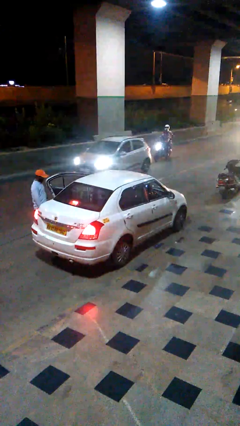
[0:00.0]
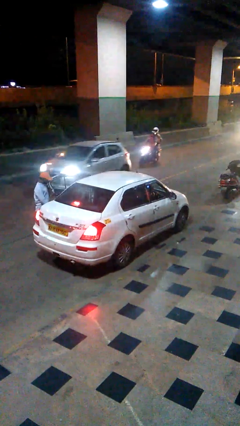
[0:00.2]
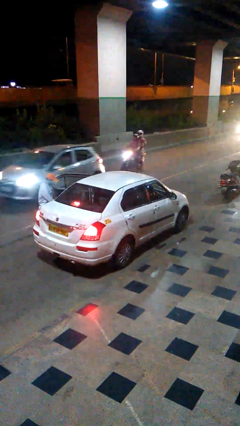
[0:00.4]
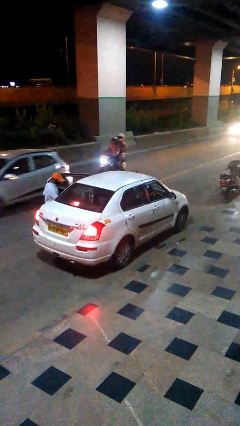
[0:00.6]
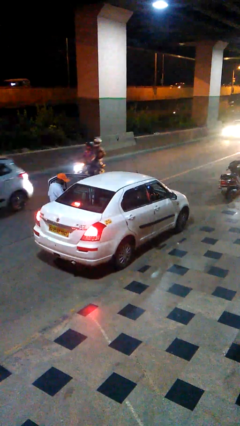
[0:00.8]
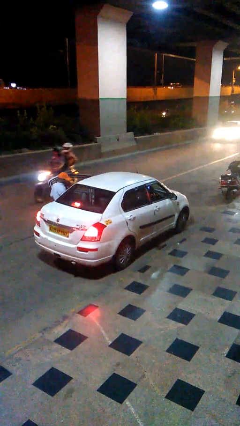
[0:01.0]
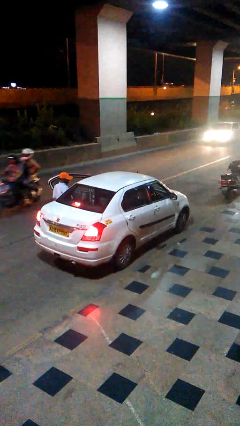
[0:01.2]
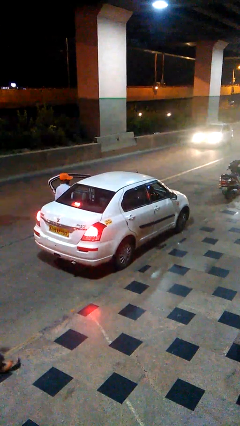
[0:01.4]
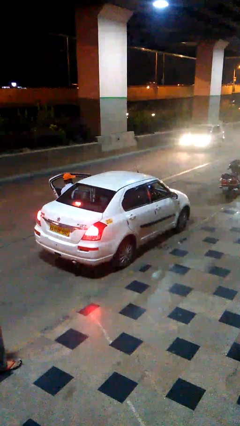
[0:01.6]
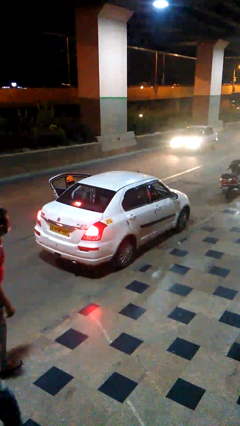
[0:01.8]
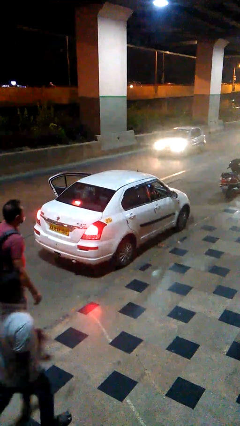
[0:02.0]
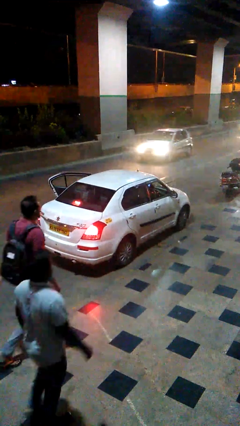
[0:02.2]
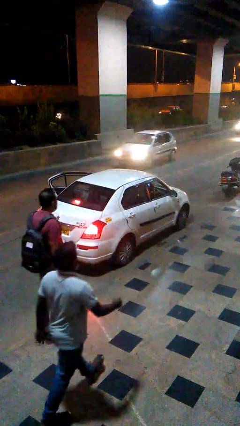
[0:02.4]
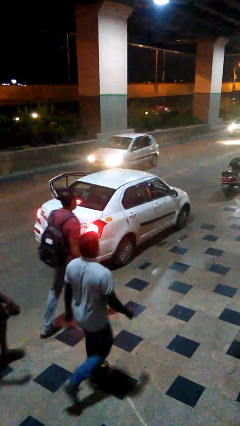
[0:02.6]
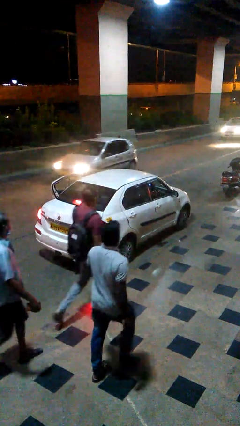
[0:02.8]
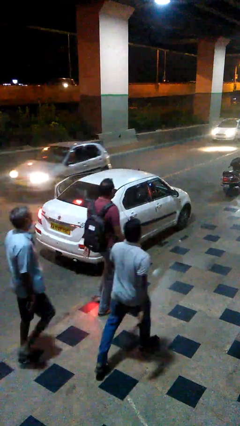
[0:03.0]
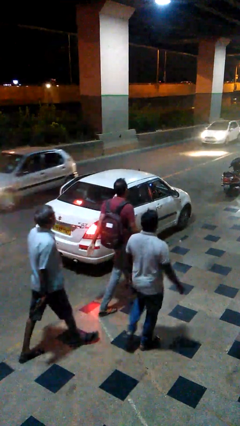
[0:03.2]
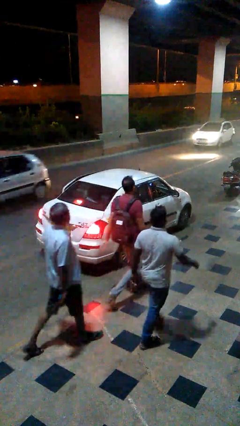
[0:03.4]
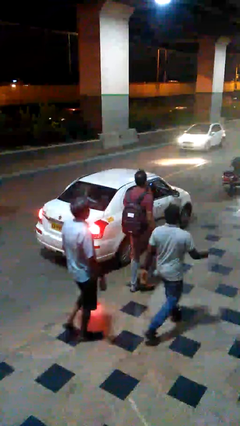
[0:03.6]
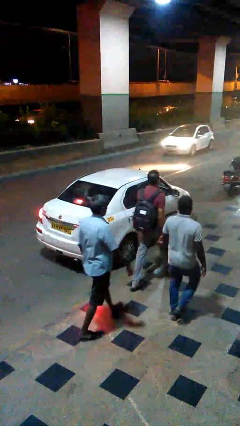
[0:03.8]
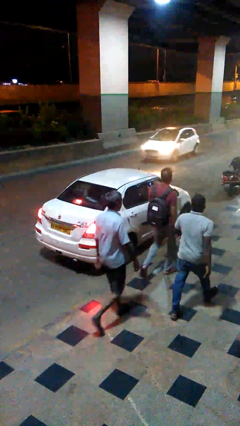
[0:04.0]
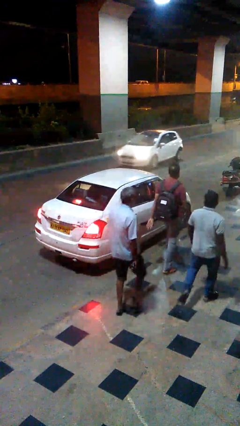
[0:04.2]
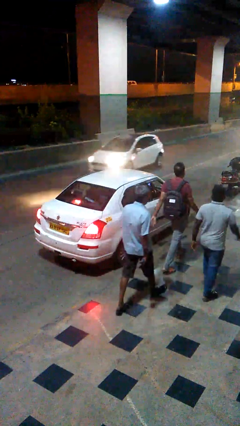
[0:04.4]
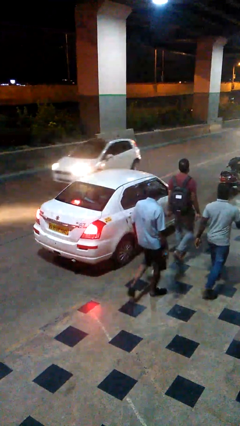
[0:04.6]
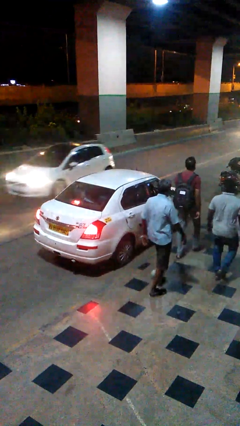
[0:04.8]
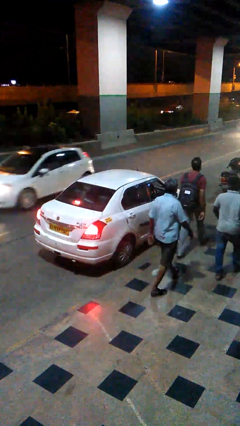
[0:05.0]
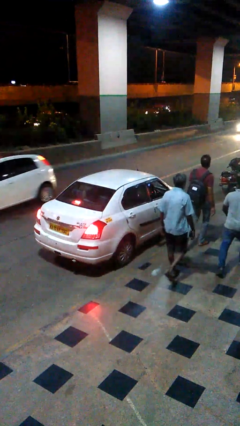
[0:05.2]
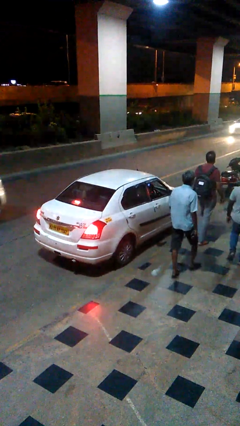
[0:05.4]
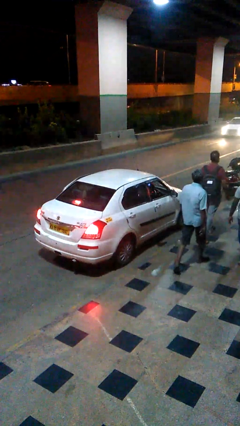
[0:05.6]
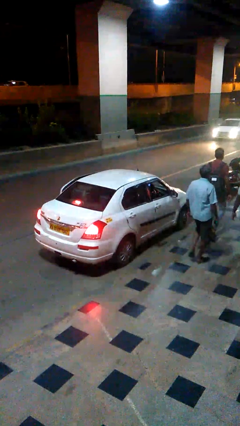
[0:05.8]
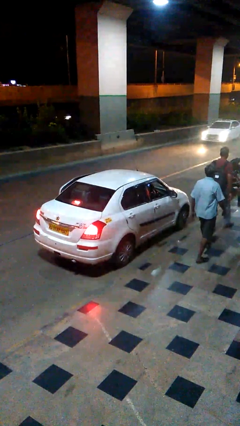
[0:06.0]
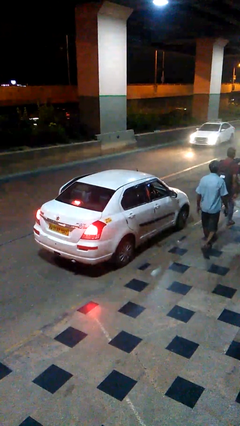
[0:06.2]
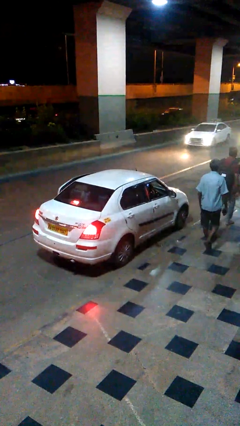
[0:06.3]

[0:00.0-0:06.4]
car picks up person

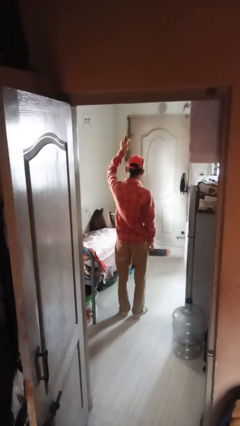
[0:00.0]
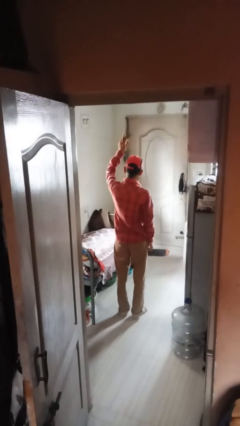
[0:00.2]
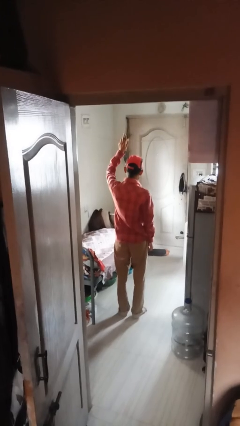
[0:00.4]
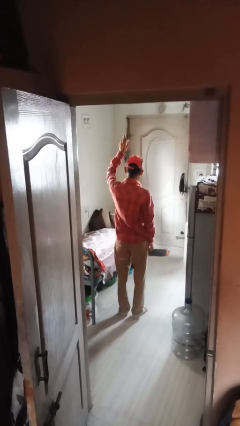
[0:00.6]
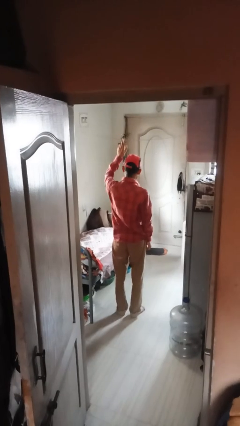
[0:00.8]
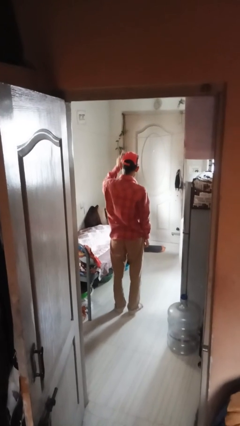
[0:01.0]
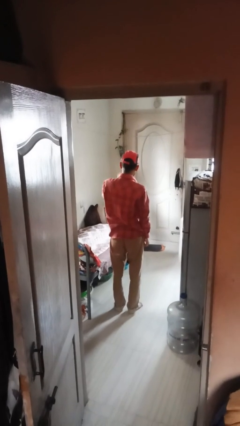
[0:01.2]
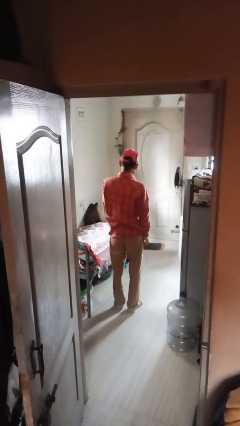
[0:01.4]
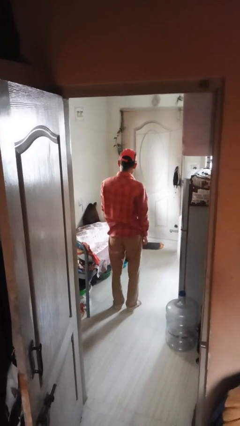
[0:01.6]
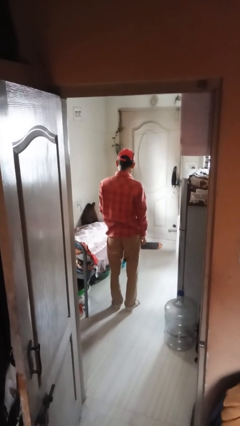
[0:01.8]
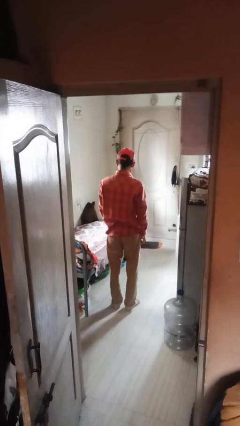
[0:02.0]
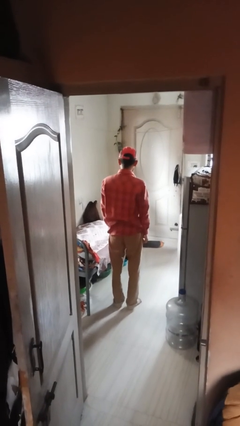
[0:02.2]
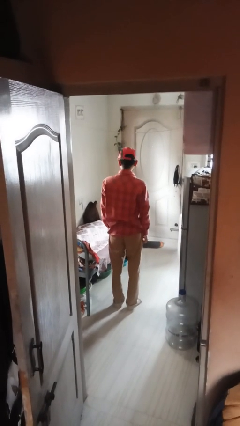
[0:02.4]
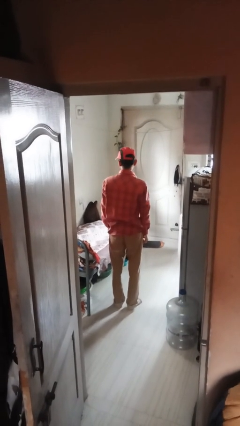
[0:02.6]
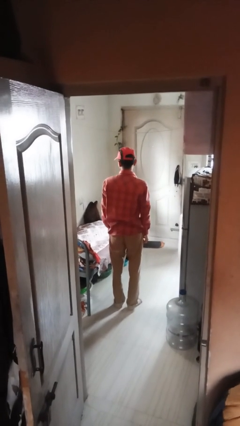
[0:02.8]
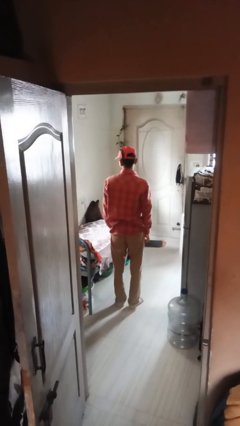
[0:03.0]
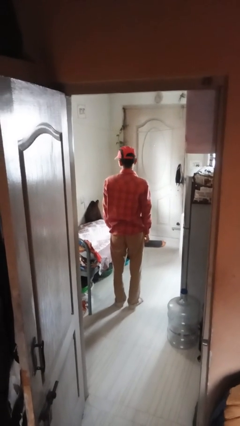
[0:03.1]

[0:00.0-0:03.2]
person gestures swipe down

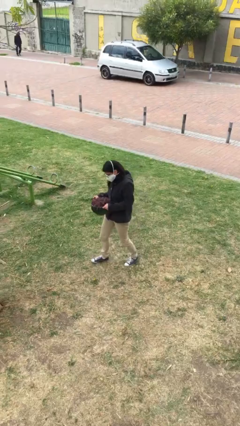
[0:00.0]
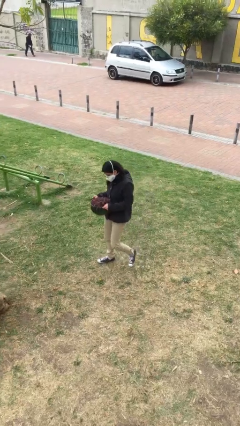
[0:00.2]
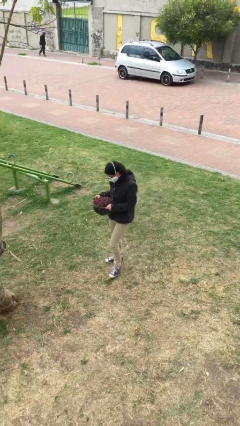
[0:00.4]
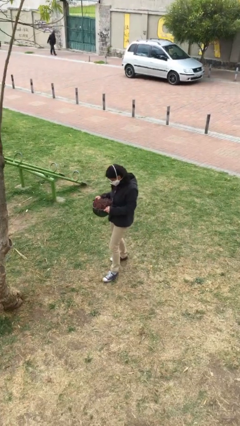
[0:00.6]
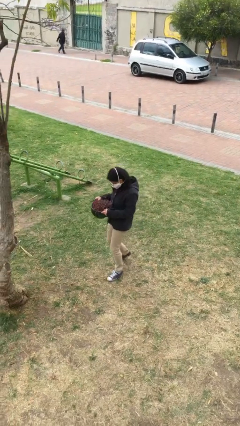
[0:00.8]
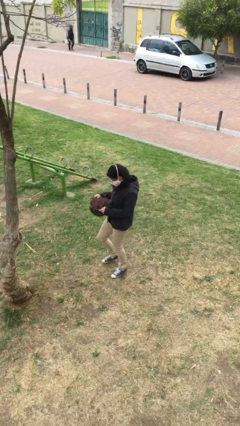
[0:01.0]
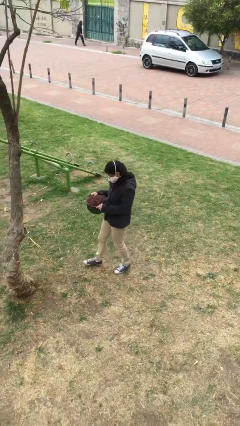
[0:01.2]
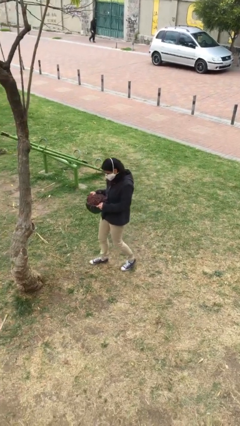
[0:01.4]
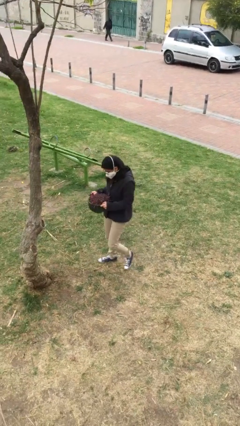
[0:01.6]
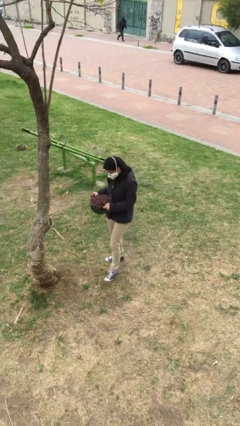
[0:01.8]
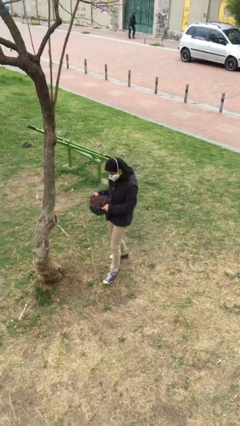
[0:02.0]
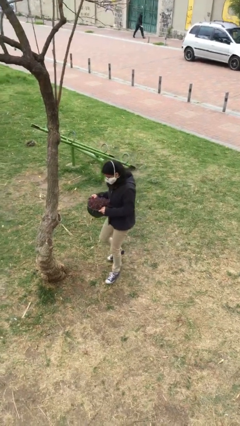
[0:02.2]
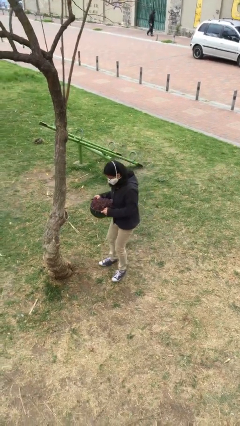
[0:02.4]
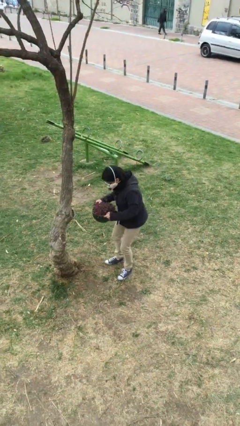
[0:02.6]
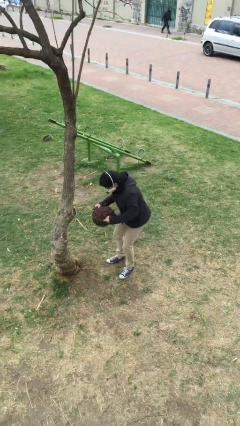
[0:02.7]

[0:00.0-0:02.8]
person carries heavy object

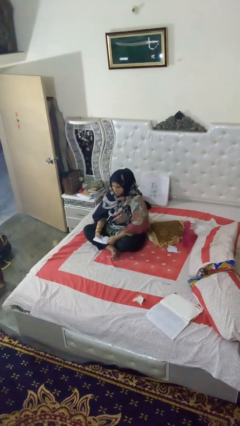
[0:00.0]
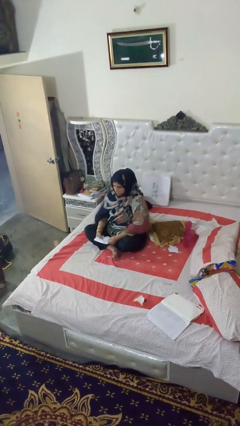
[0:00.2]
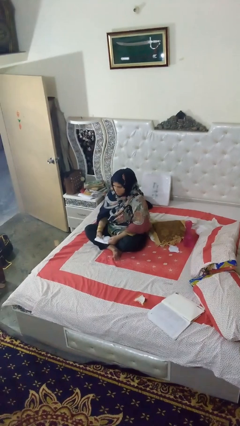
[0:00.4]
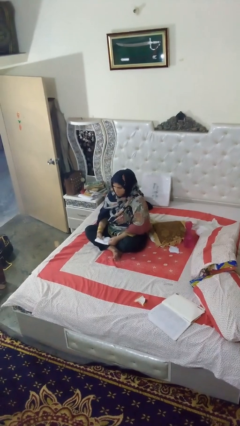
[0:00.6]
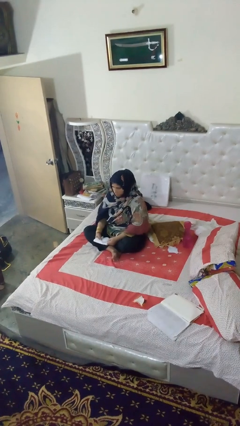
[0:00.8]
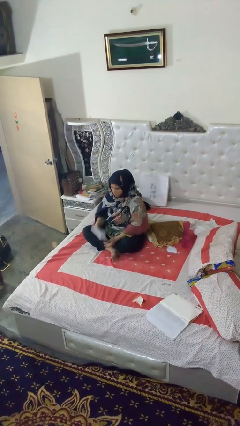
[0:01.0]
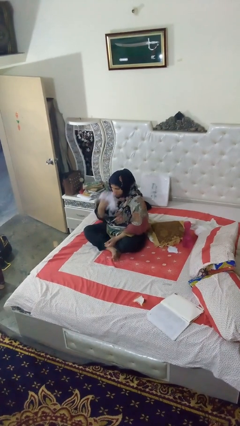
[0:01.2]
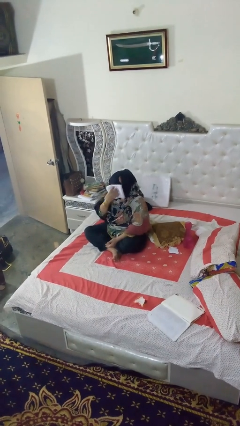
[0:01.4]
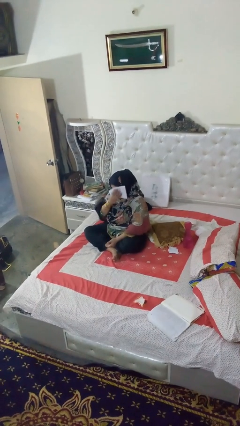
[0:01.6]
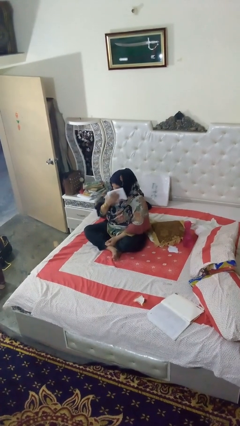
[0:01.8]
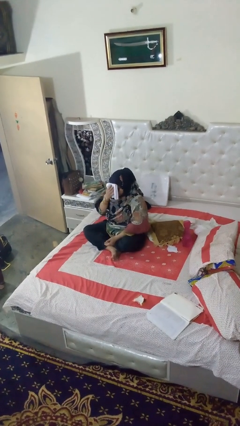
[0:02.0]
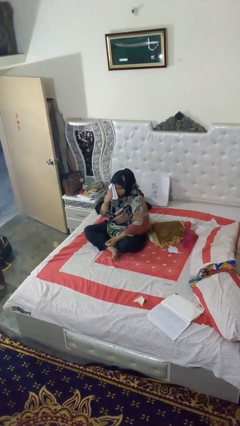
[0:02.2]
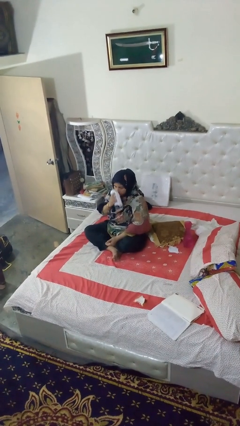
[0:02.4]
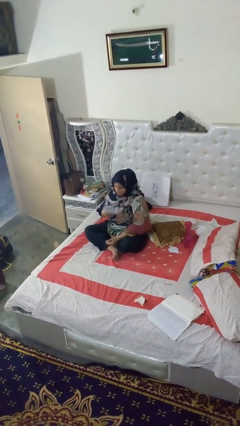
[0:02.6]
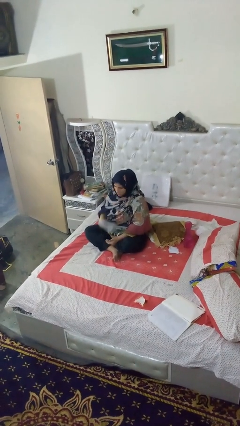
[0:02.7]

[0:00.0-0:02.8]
person wipes mouth with napkin

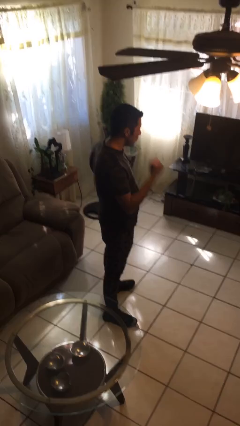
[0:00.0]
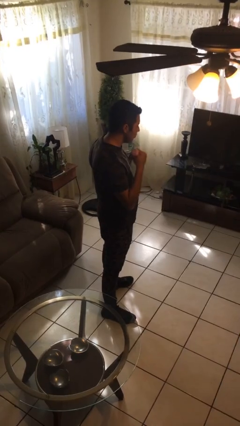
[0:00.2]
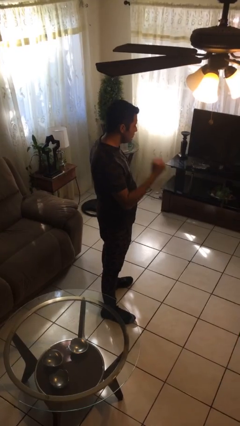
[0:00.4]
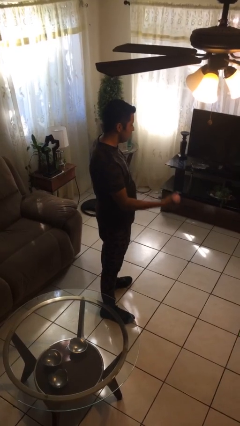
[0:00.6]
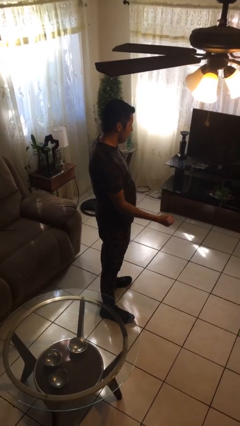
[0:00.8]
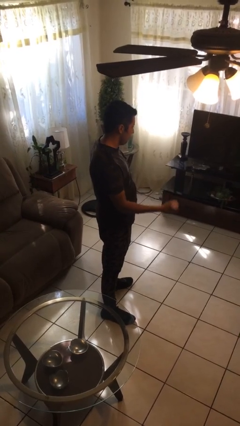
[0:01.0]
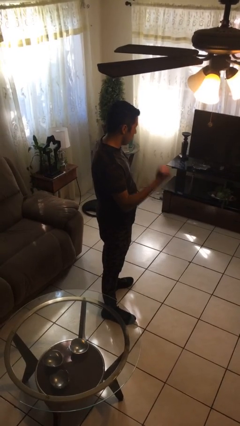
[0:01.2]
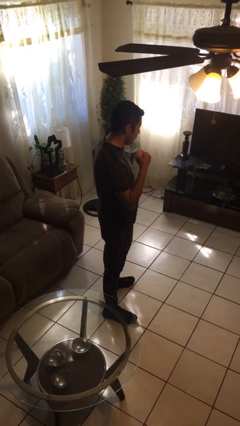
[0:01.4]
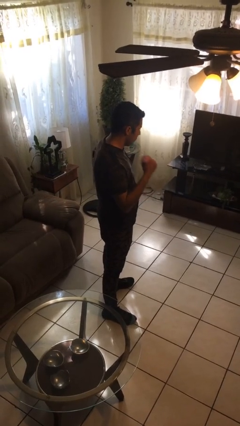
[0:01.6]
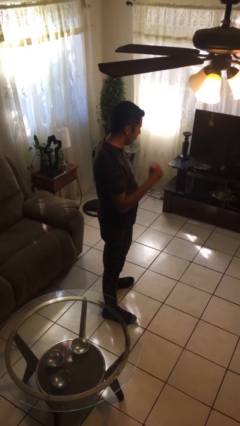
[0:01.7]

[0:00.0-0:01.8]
person lifts dumbbells

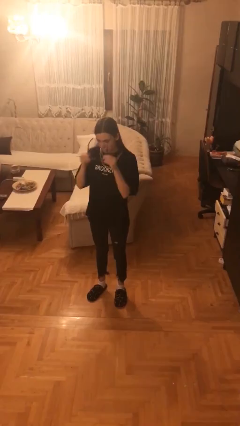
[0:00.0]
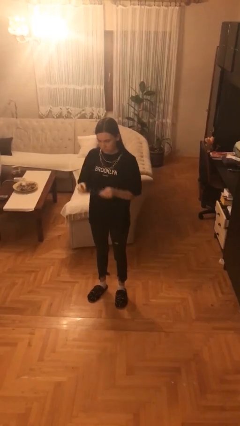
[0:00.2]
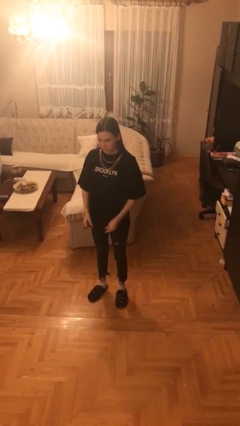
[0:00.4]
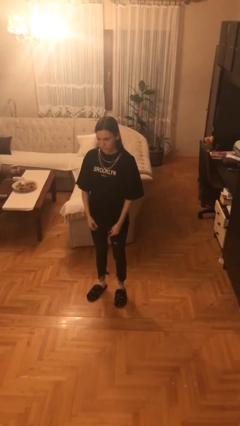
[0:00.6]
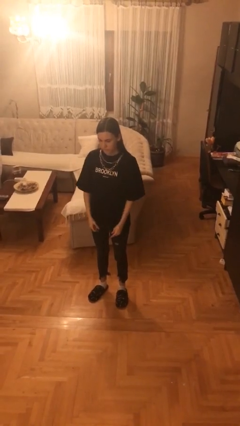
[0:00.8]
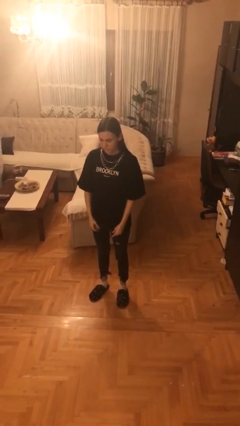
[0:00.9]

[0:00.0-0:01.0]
person takes off sunglasses
